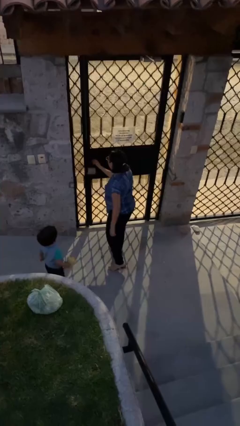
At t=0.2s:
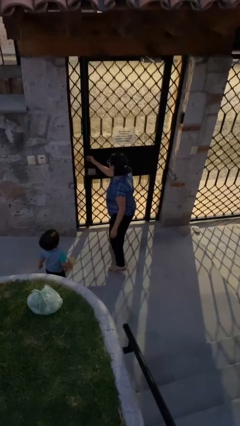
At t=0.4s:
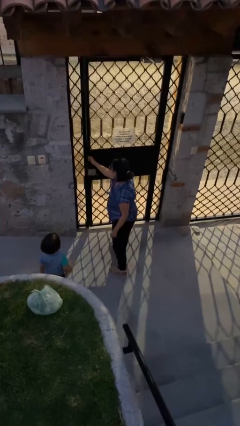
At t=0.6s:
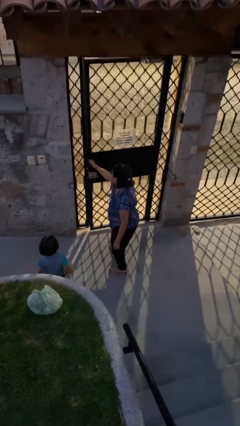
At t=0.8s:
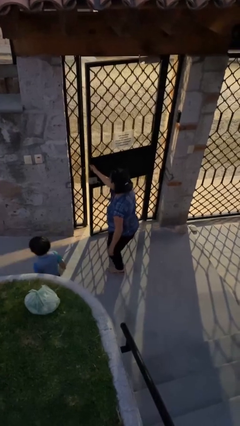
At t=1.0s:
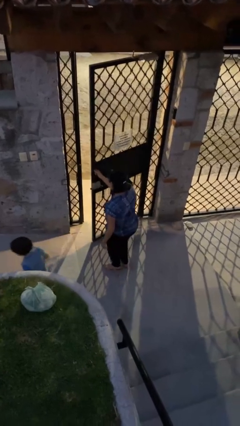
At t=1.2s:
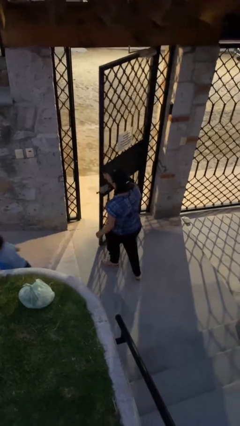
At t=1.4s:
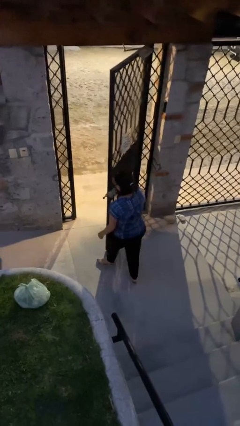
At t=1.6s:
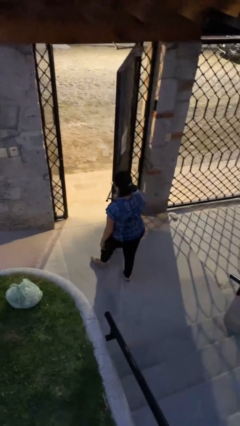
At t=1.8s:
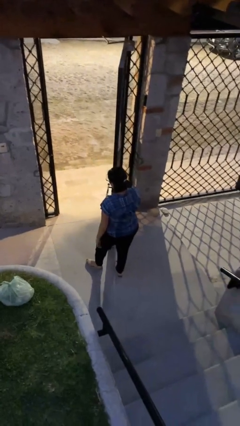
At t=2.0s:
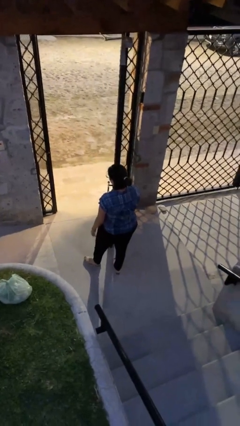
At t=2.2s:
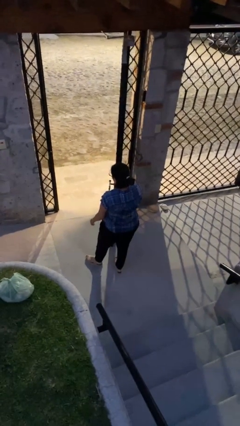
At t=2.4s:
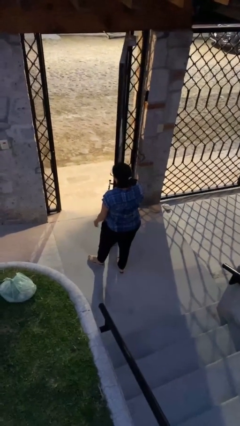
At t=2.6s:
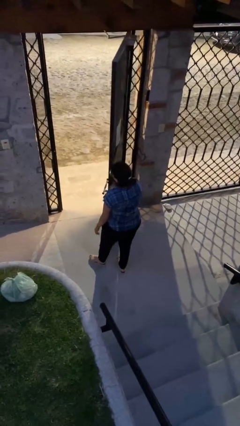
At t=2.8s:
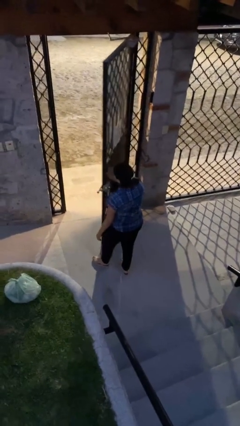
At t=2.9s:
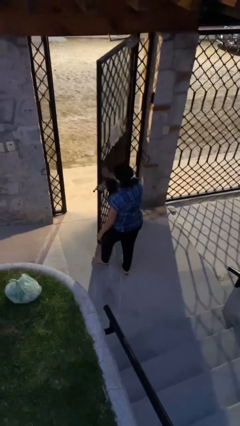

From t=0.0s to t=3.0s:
person opens facility door

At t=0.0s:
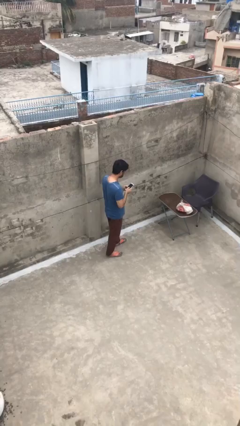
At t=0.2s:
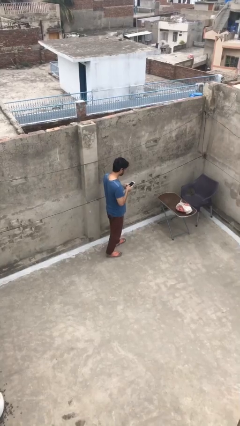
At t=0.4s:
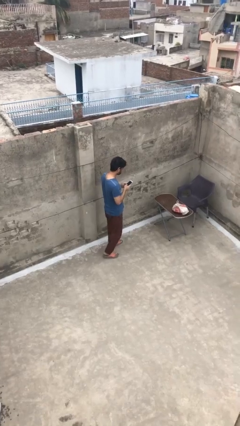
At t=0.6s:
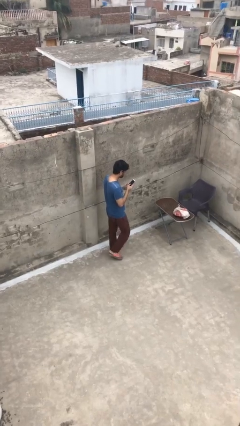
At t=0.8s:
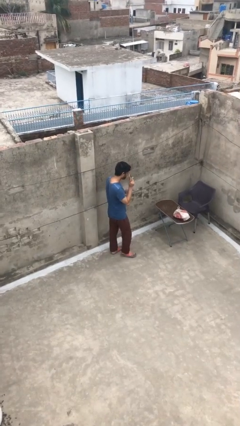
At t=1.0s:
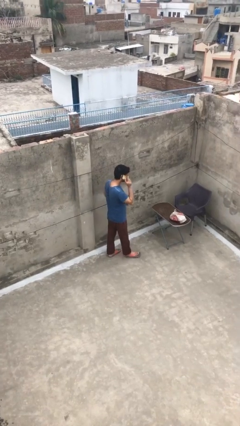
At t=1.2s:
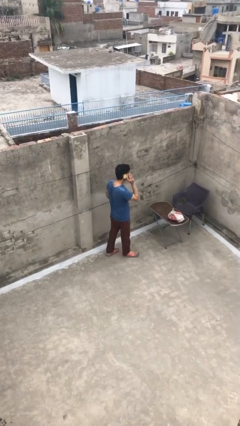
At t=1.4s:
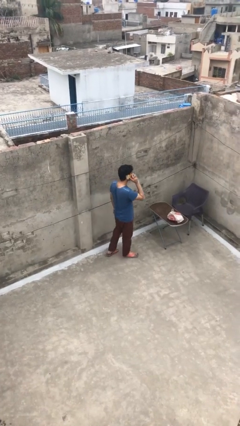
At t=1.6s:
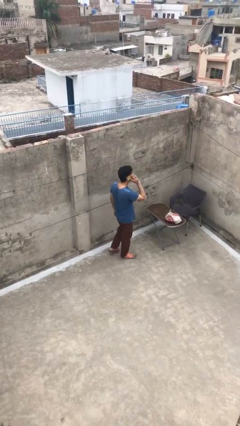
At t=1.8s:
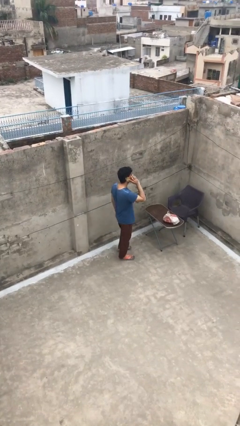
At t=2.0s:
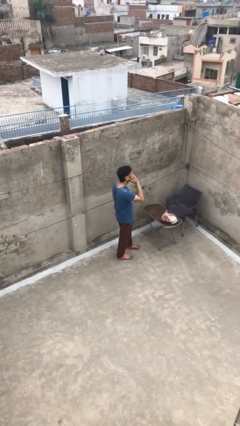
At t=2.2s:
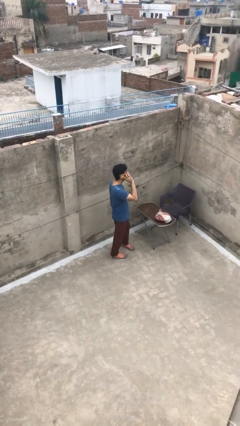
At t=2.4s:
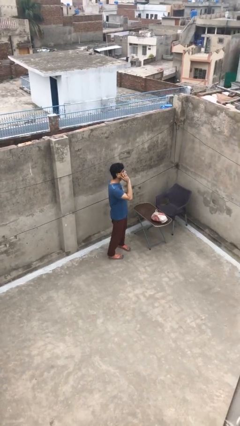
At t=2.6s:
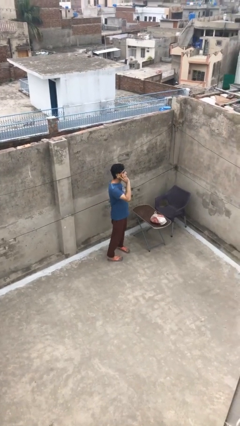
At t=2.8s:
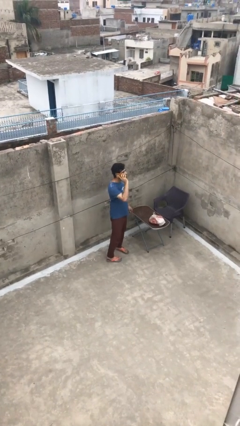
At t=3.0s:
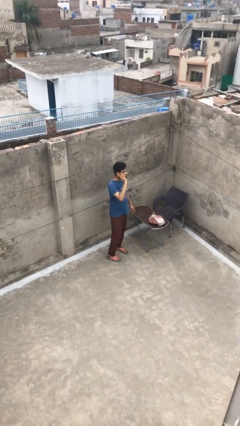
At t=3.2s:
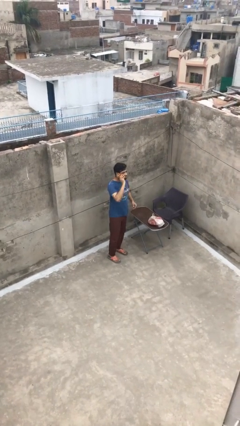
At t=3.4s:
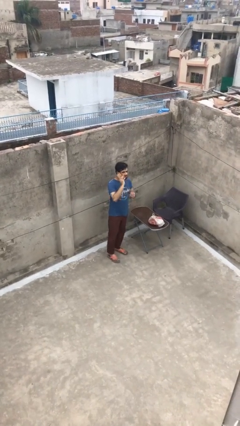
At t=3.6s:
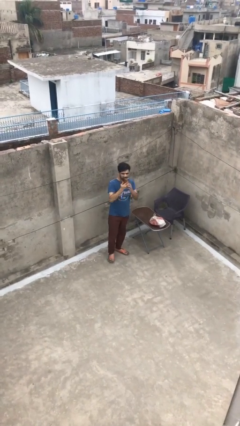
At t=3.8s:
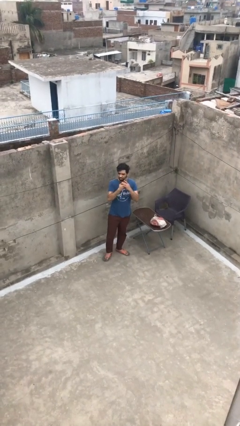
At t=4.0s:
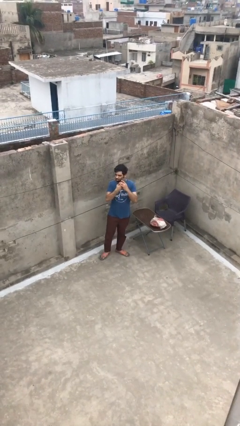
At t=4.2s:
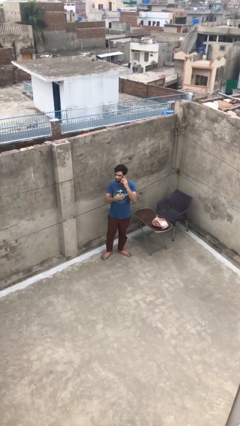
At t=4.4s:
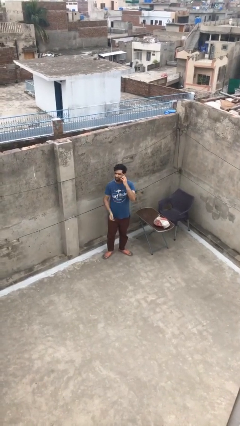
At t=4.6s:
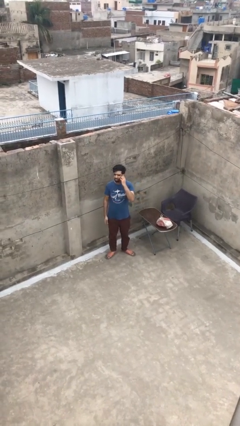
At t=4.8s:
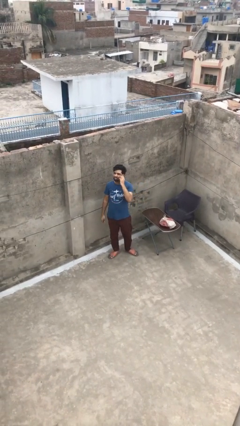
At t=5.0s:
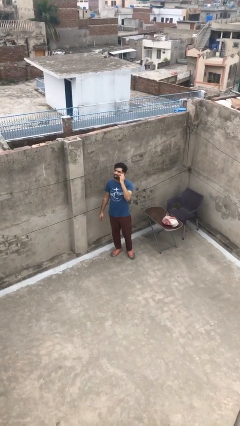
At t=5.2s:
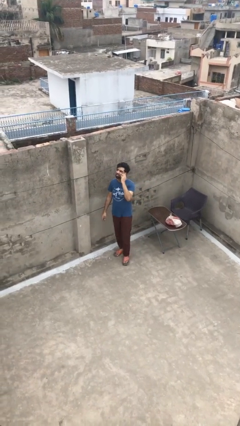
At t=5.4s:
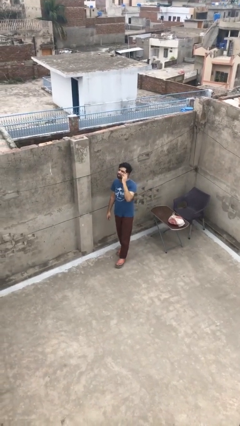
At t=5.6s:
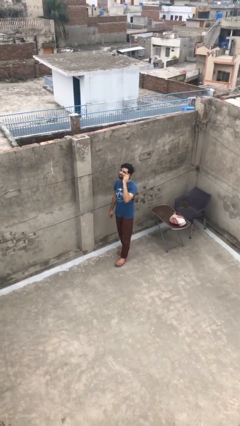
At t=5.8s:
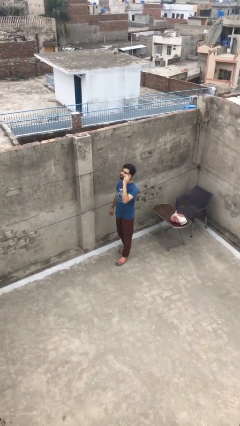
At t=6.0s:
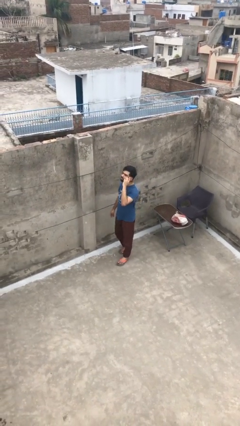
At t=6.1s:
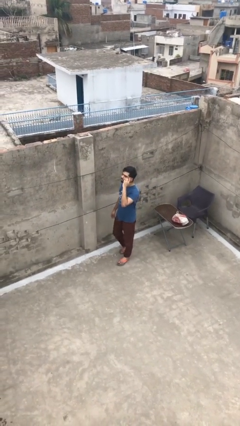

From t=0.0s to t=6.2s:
person talks on phone

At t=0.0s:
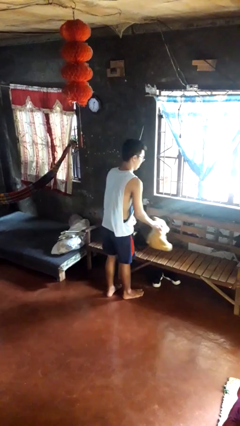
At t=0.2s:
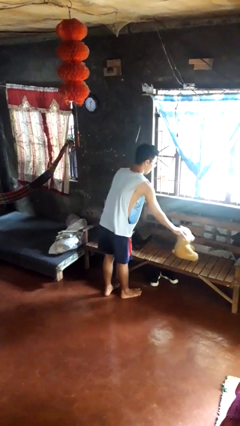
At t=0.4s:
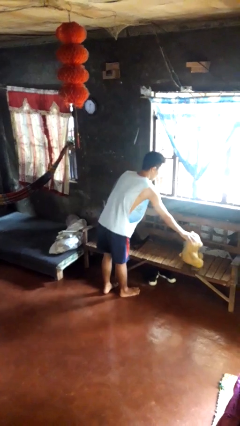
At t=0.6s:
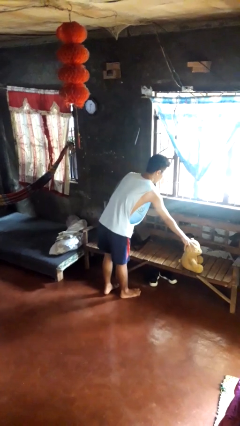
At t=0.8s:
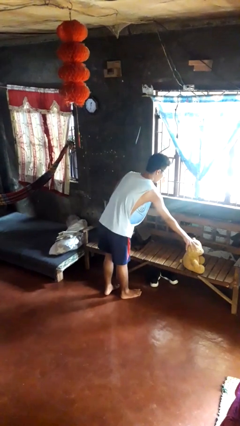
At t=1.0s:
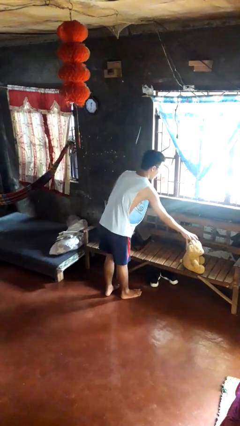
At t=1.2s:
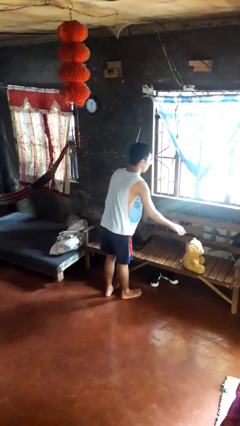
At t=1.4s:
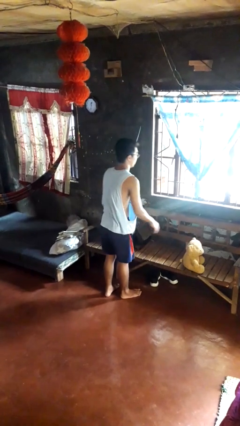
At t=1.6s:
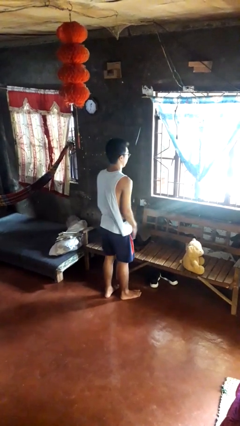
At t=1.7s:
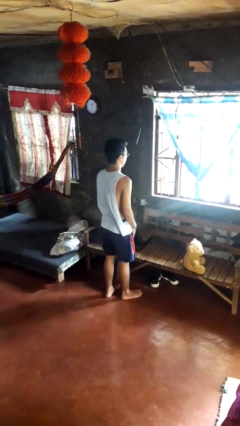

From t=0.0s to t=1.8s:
person puts down object on couch

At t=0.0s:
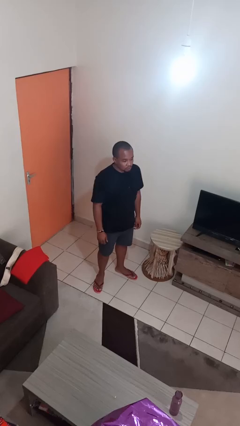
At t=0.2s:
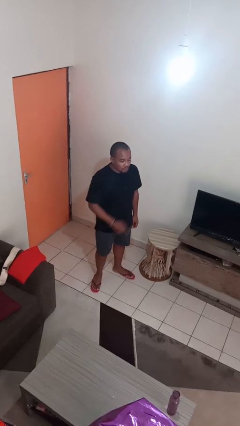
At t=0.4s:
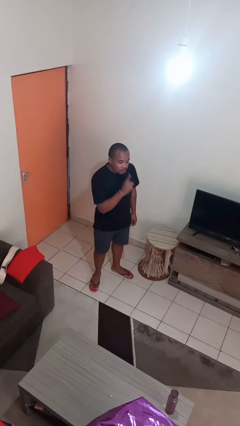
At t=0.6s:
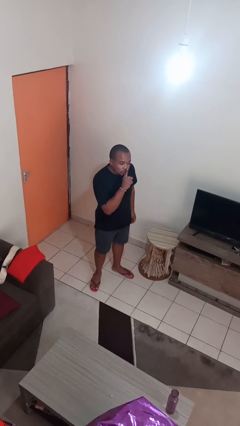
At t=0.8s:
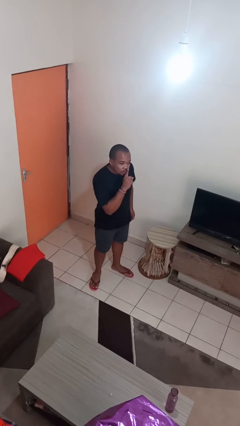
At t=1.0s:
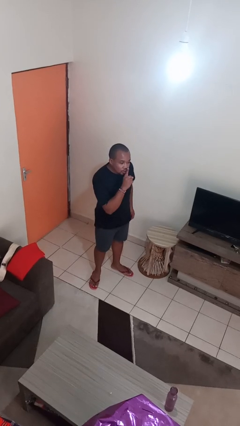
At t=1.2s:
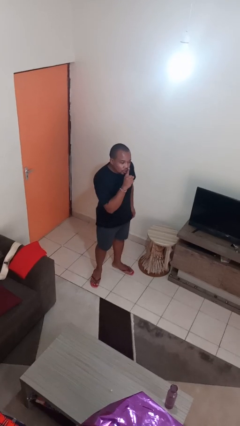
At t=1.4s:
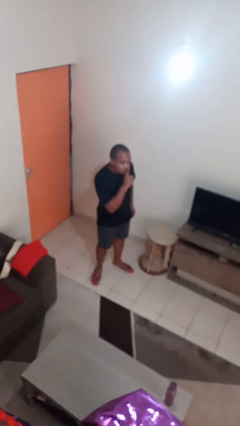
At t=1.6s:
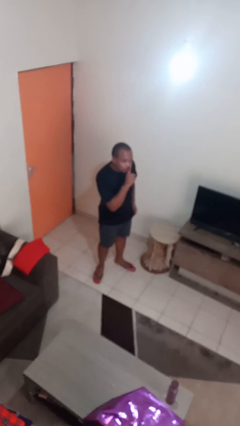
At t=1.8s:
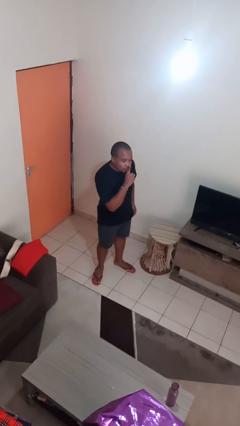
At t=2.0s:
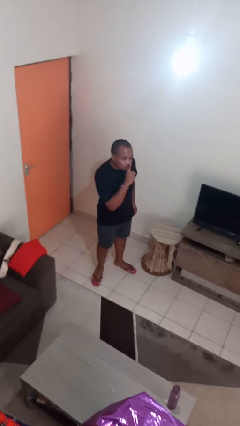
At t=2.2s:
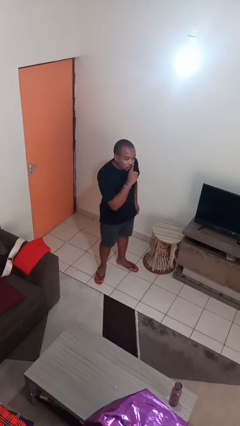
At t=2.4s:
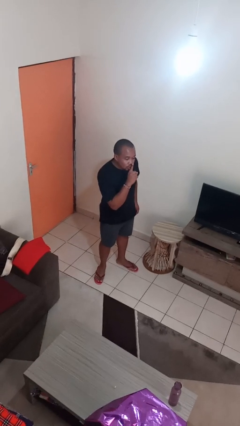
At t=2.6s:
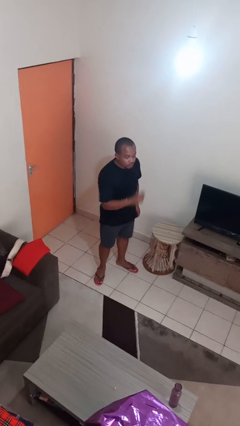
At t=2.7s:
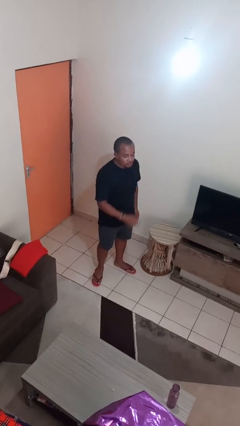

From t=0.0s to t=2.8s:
person gestures be quiet

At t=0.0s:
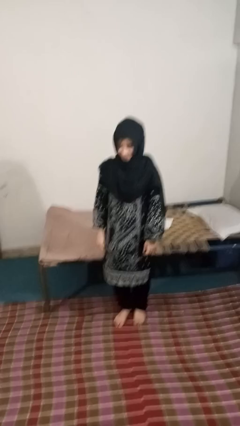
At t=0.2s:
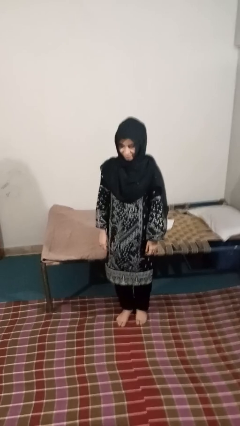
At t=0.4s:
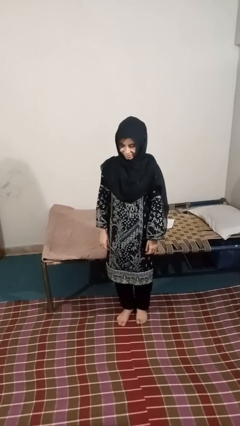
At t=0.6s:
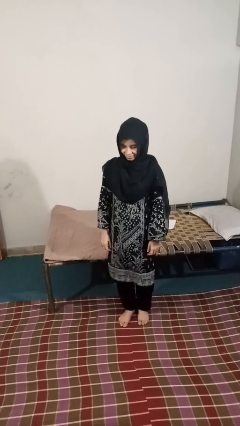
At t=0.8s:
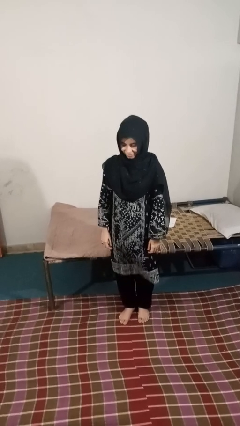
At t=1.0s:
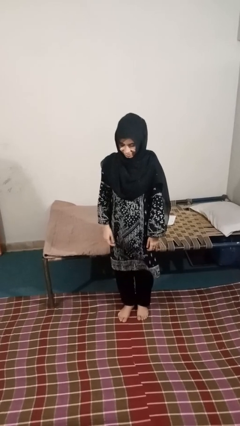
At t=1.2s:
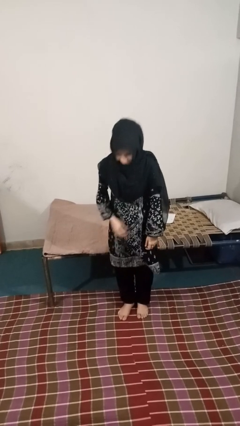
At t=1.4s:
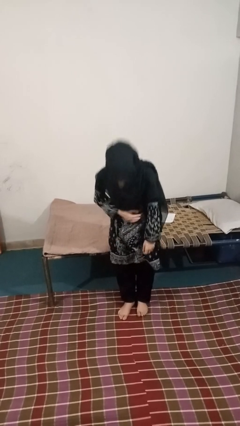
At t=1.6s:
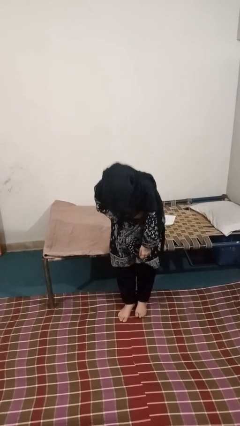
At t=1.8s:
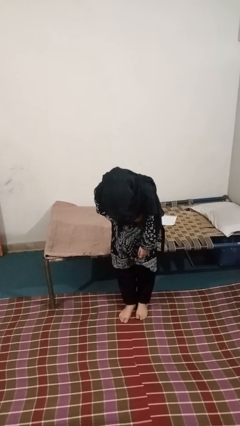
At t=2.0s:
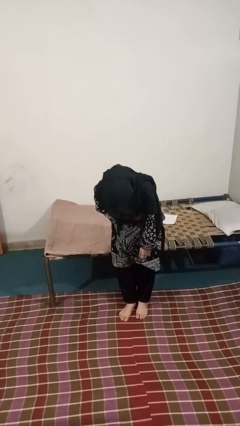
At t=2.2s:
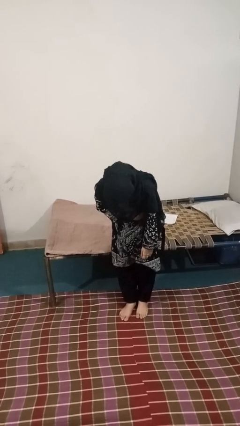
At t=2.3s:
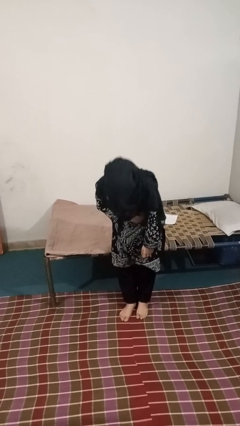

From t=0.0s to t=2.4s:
person bows

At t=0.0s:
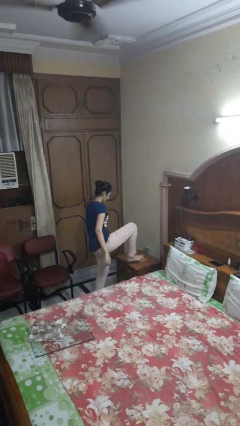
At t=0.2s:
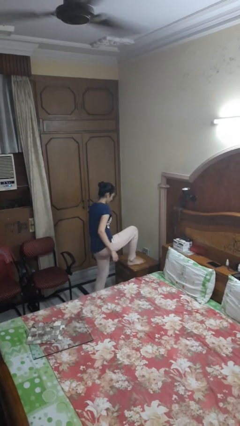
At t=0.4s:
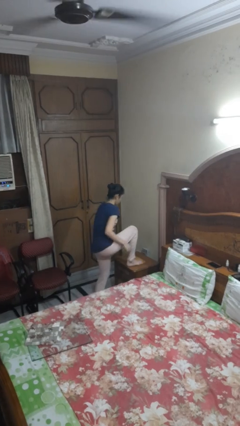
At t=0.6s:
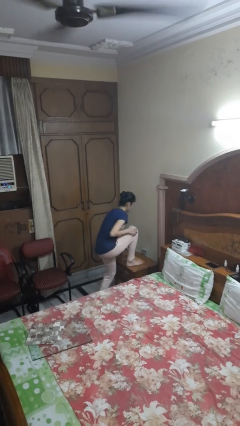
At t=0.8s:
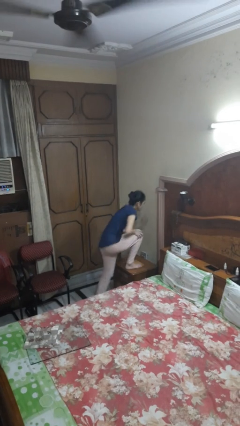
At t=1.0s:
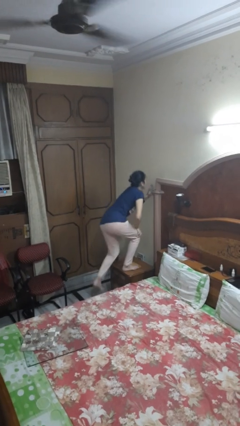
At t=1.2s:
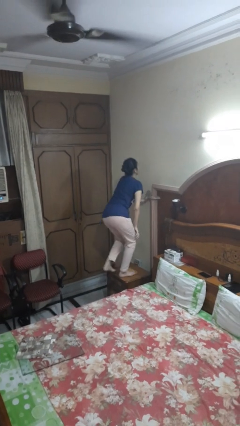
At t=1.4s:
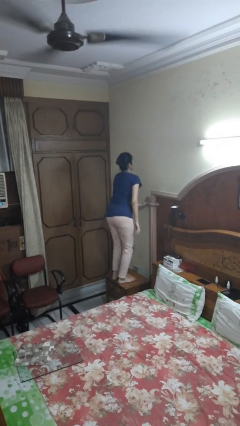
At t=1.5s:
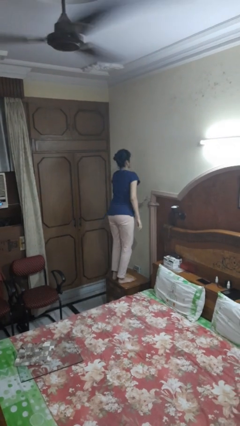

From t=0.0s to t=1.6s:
person climbs on table
